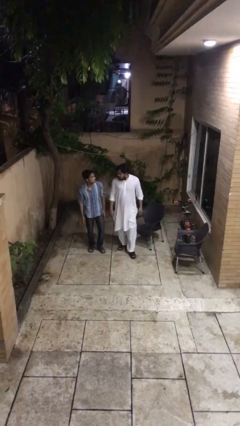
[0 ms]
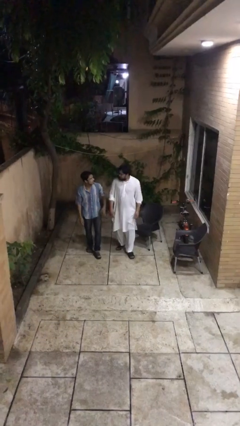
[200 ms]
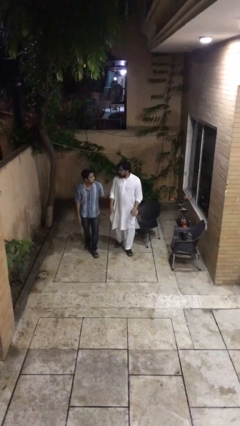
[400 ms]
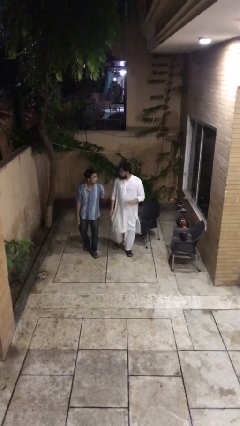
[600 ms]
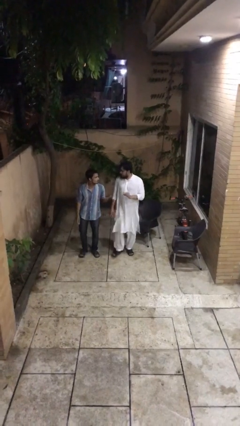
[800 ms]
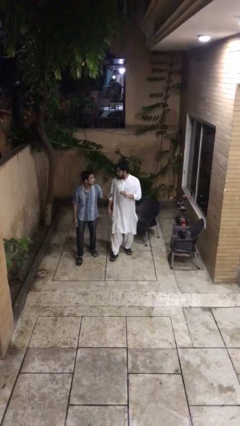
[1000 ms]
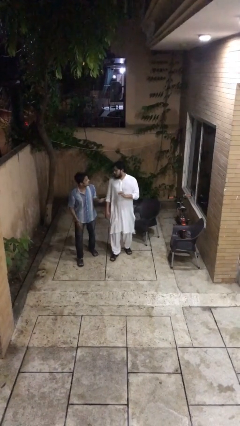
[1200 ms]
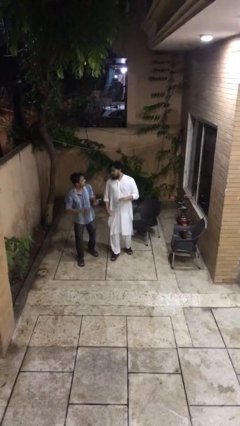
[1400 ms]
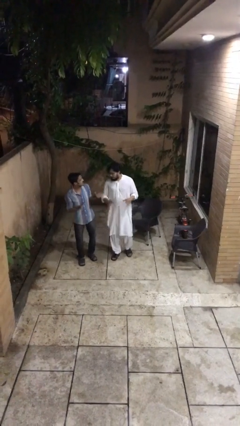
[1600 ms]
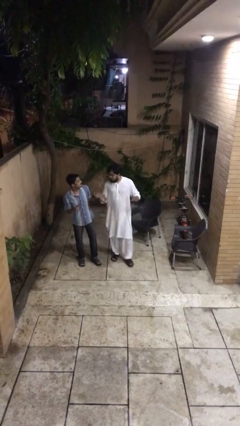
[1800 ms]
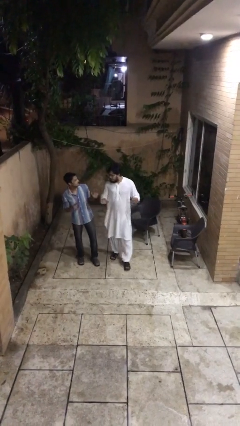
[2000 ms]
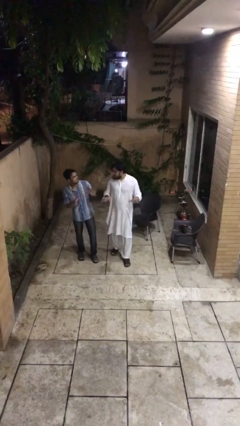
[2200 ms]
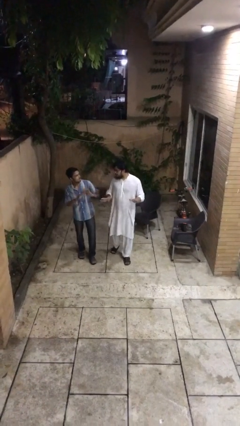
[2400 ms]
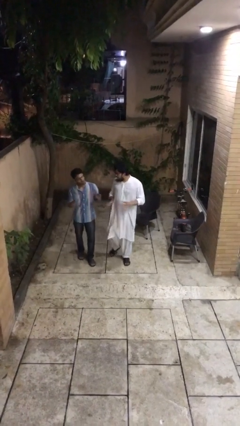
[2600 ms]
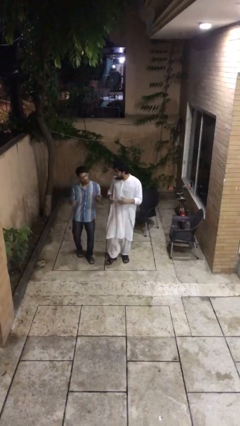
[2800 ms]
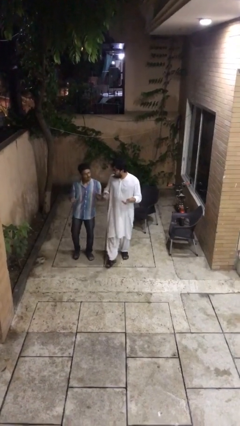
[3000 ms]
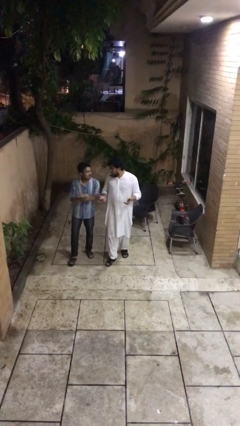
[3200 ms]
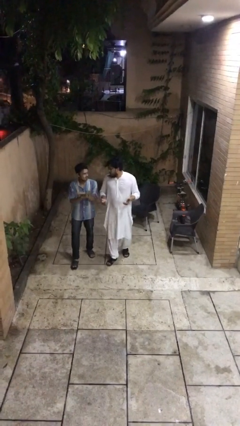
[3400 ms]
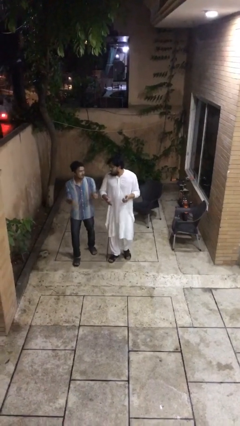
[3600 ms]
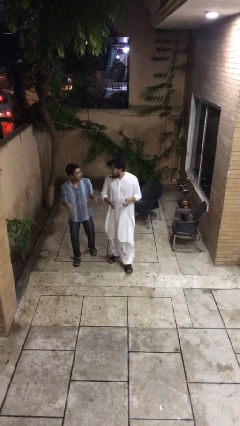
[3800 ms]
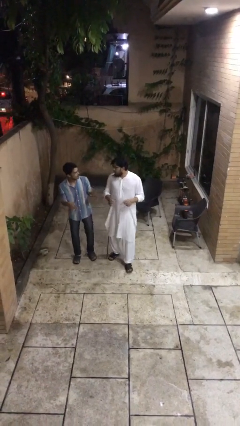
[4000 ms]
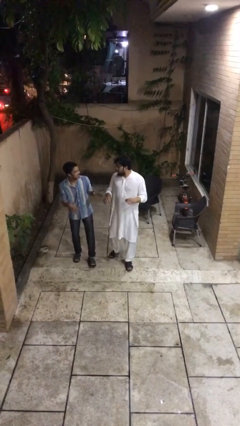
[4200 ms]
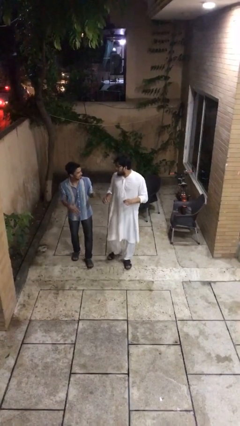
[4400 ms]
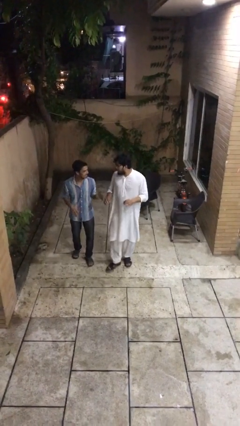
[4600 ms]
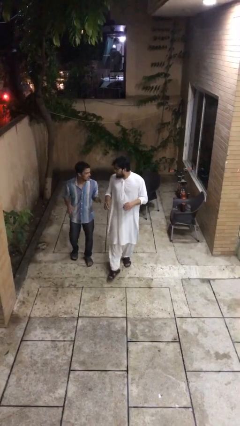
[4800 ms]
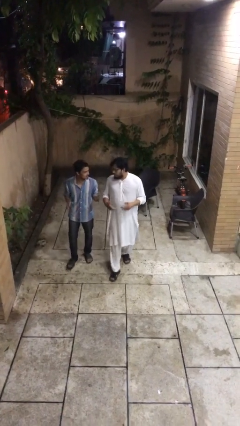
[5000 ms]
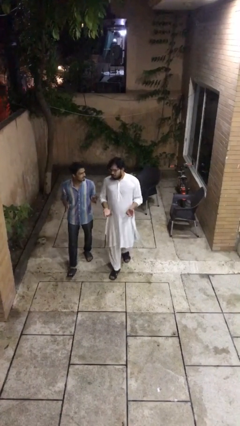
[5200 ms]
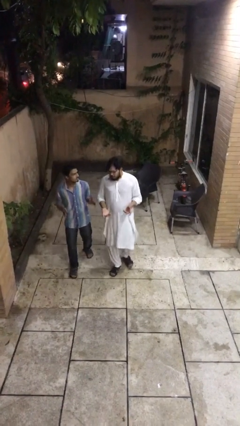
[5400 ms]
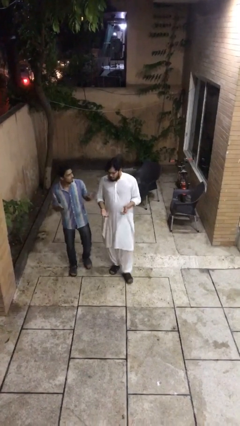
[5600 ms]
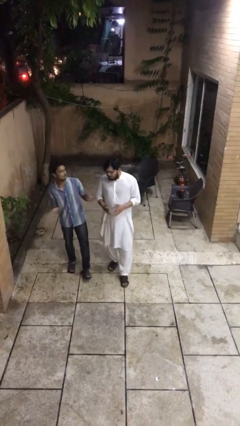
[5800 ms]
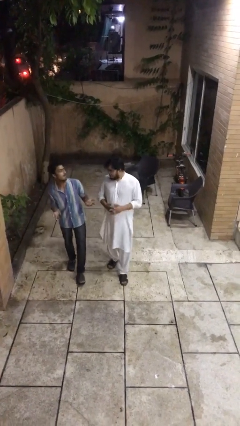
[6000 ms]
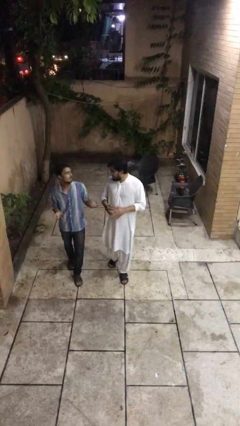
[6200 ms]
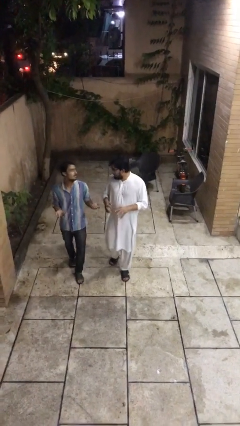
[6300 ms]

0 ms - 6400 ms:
person talks to person

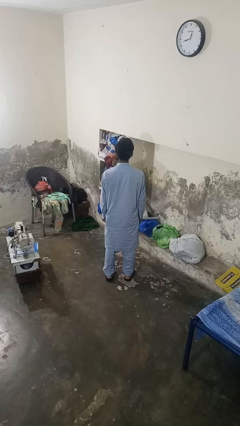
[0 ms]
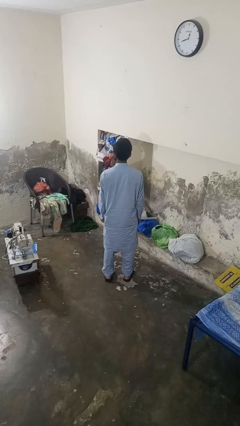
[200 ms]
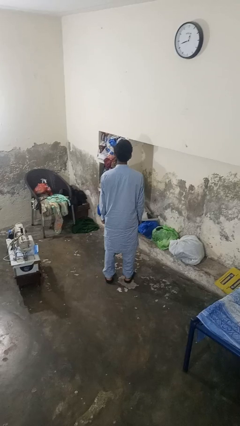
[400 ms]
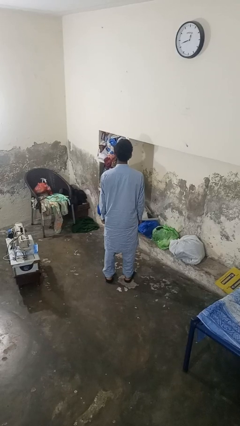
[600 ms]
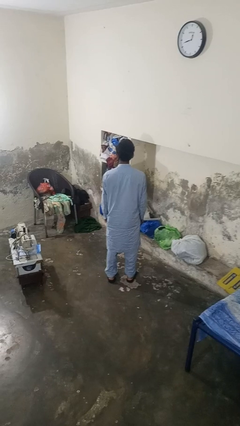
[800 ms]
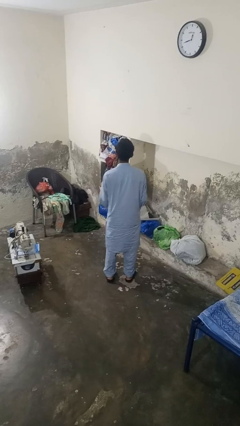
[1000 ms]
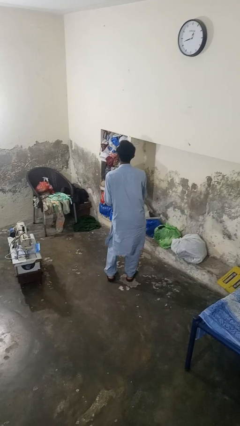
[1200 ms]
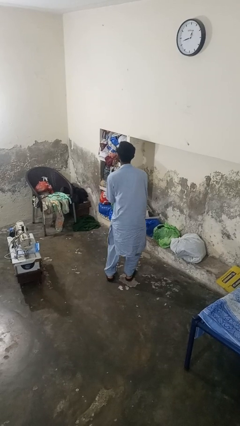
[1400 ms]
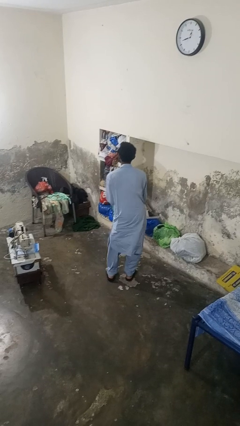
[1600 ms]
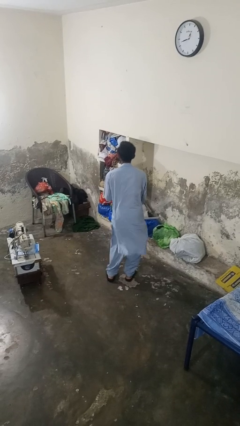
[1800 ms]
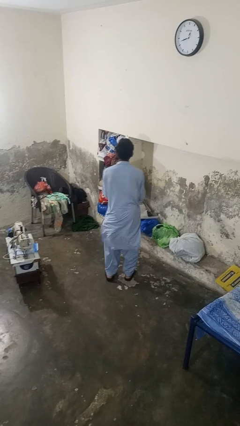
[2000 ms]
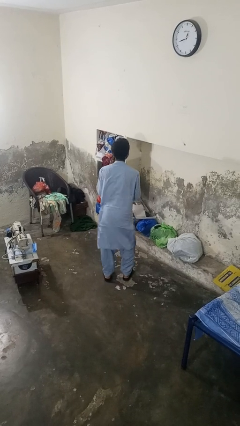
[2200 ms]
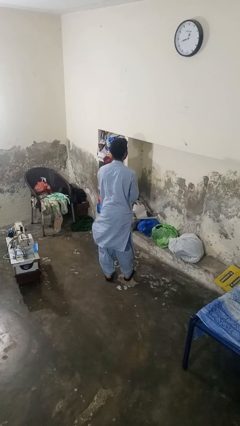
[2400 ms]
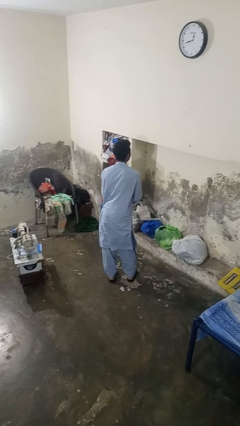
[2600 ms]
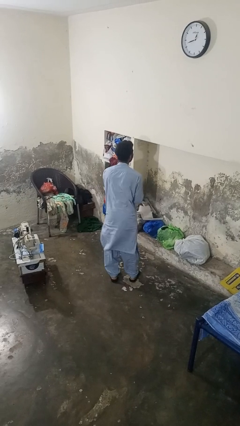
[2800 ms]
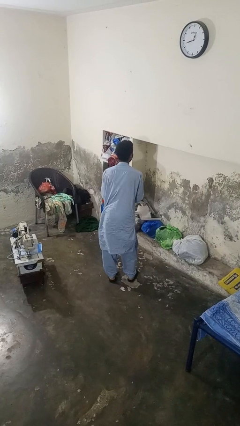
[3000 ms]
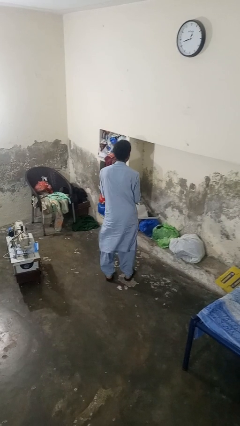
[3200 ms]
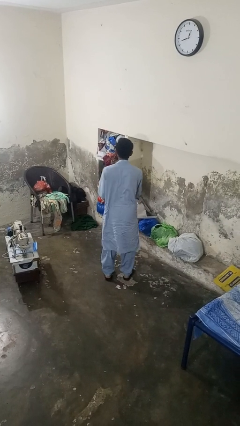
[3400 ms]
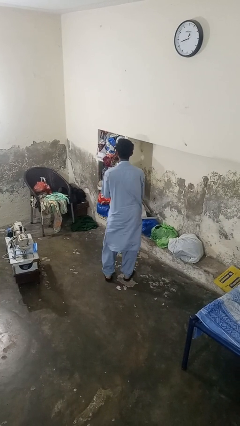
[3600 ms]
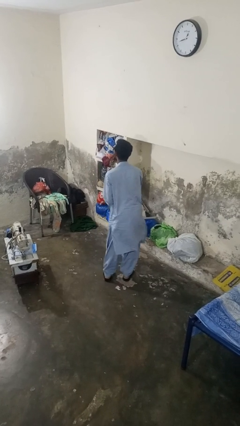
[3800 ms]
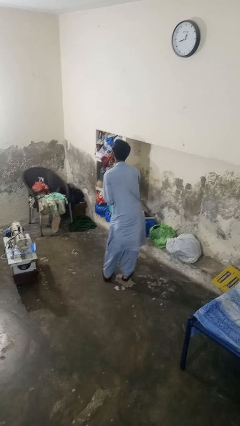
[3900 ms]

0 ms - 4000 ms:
person wiggles hips

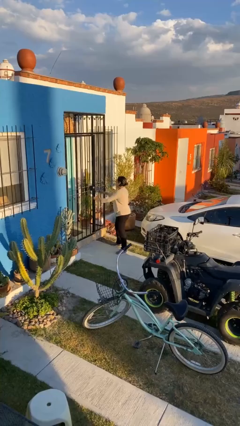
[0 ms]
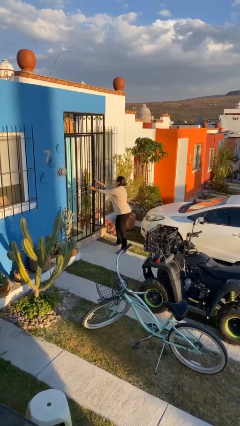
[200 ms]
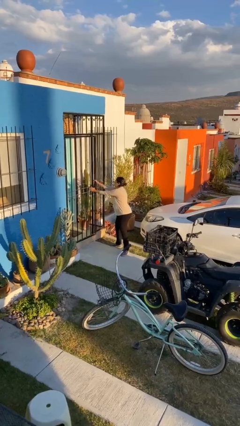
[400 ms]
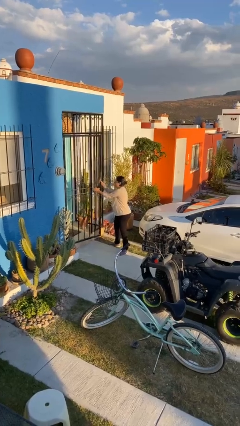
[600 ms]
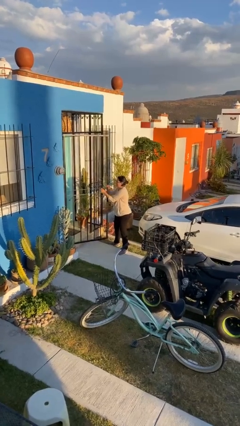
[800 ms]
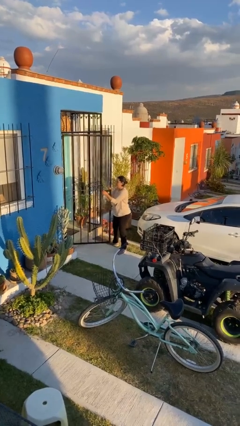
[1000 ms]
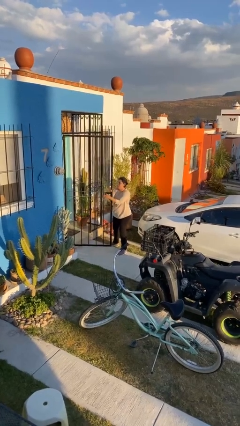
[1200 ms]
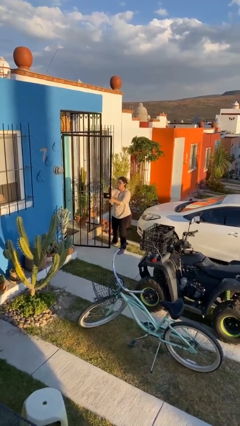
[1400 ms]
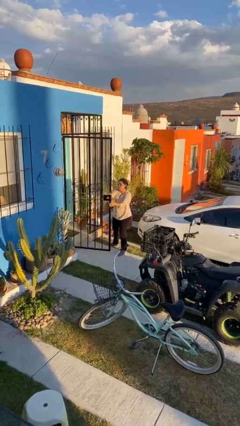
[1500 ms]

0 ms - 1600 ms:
person opens facility door

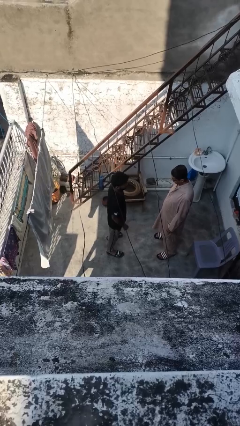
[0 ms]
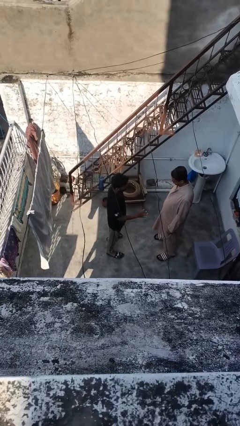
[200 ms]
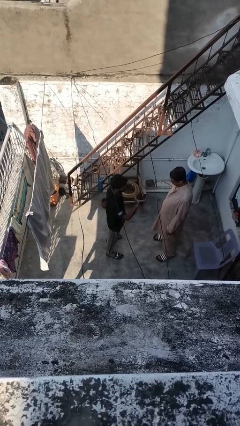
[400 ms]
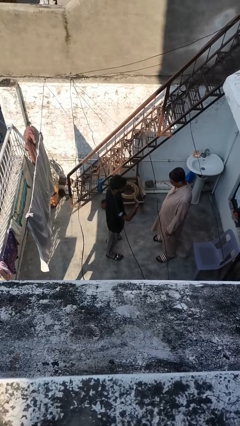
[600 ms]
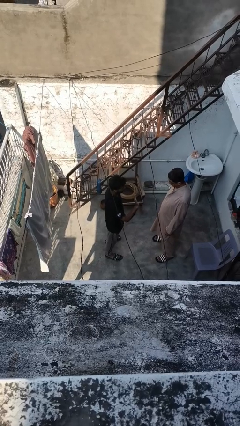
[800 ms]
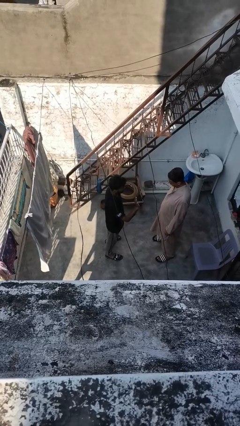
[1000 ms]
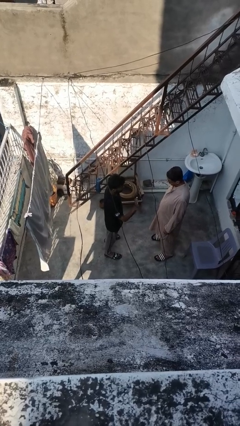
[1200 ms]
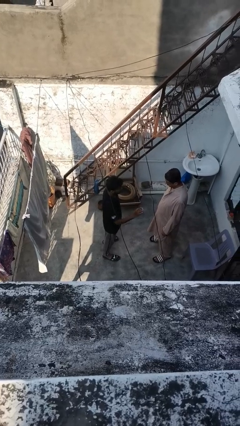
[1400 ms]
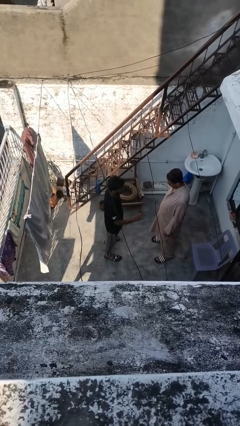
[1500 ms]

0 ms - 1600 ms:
person waves at person

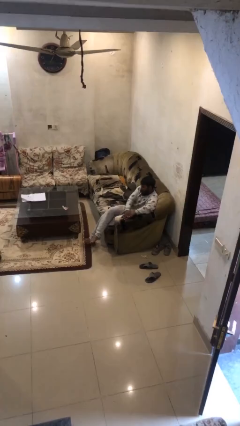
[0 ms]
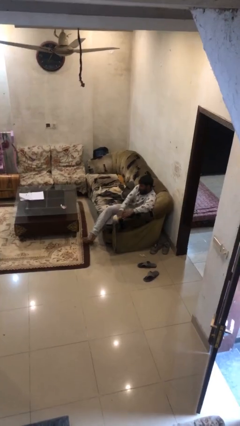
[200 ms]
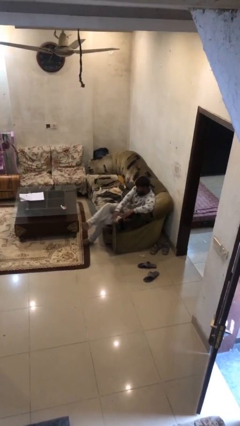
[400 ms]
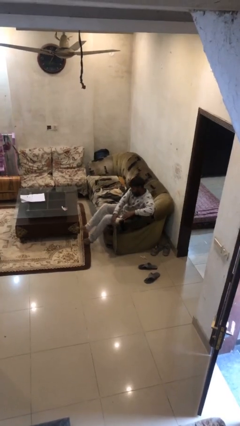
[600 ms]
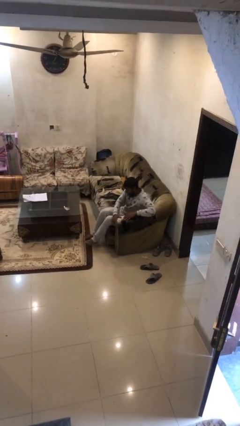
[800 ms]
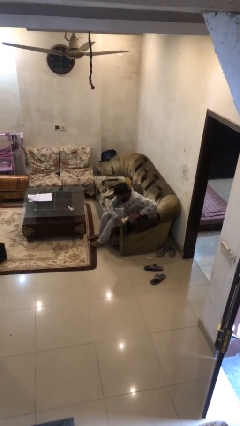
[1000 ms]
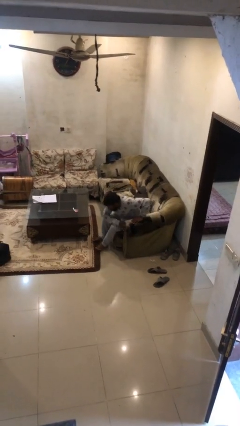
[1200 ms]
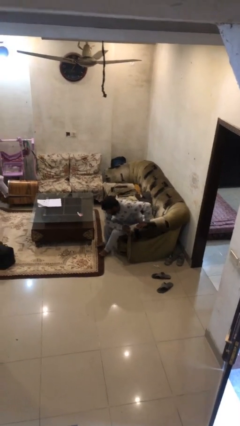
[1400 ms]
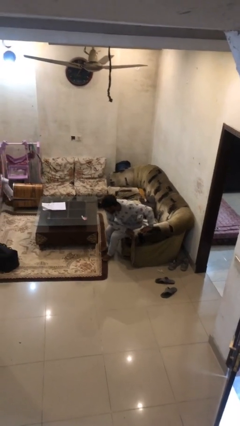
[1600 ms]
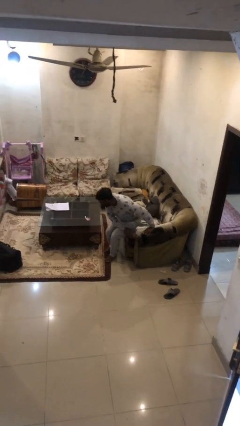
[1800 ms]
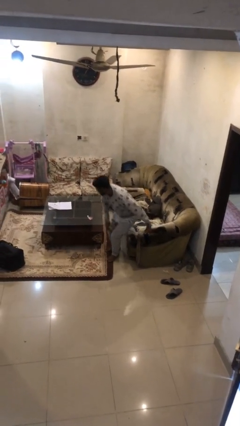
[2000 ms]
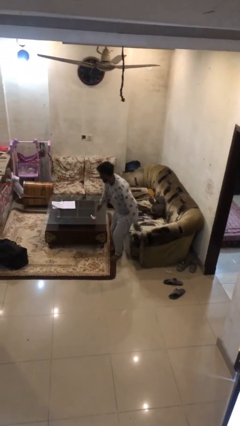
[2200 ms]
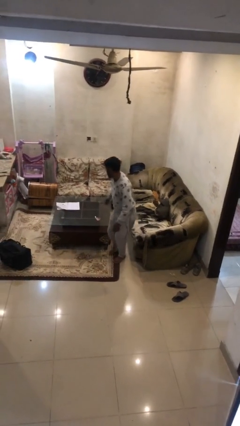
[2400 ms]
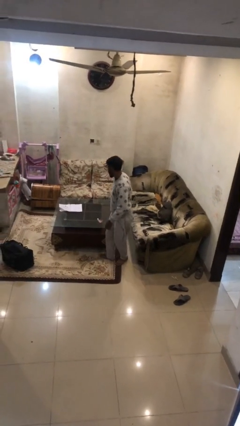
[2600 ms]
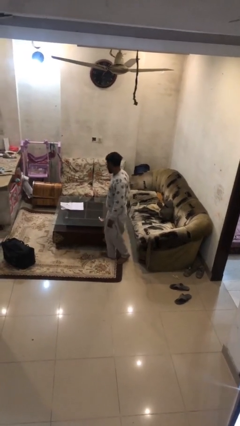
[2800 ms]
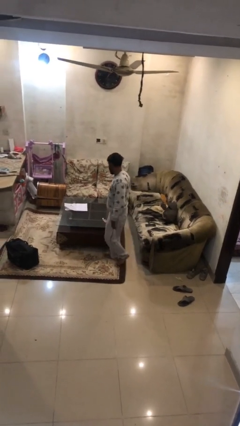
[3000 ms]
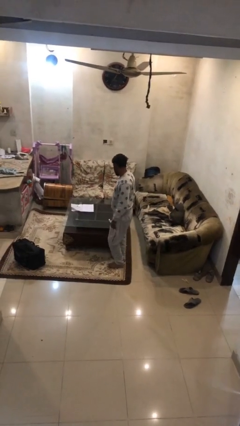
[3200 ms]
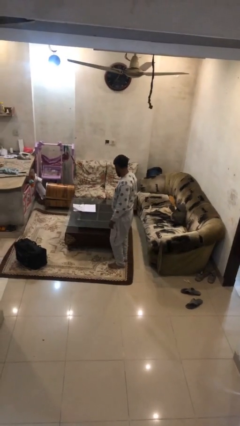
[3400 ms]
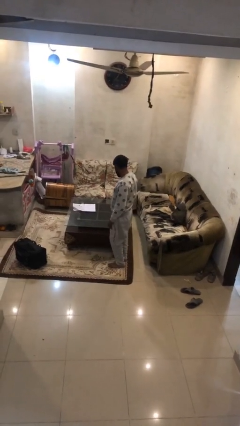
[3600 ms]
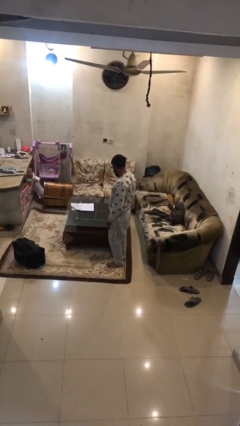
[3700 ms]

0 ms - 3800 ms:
person stands up
